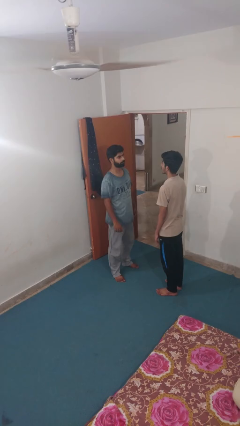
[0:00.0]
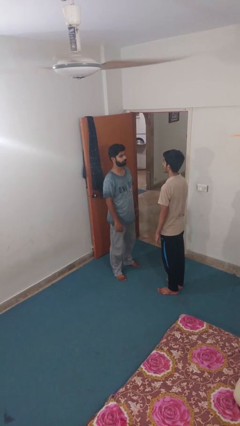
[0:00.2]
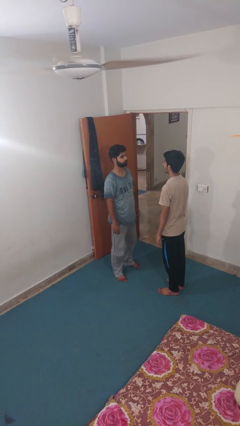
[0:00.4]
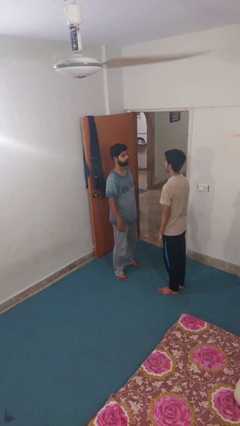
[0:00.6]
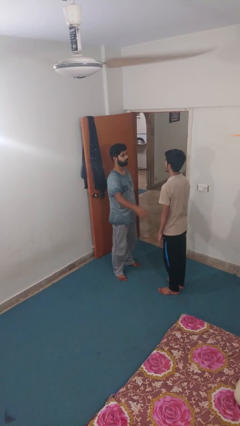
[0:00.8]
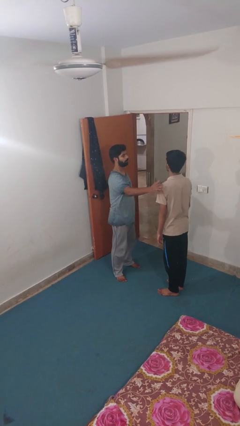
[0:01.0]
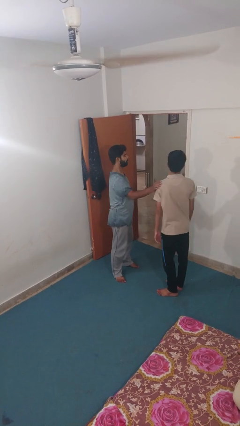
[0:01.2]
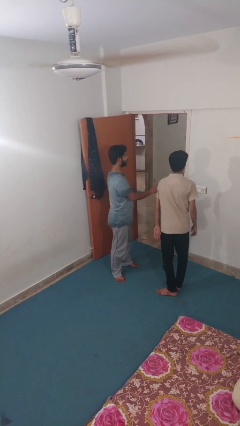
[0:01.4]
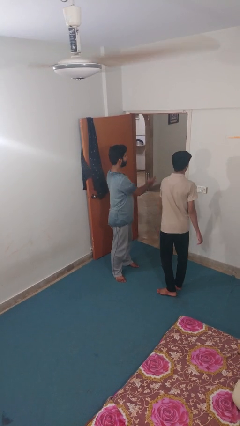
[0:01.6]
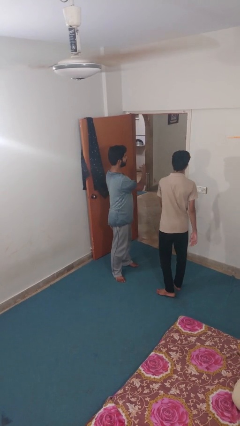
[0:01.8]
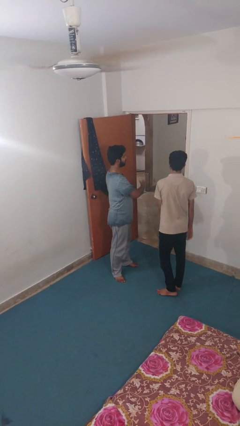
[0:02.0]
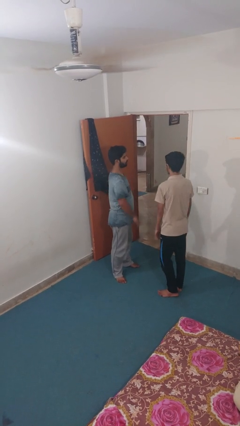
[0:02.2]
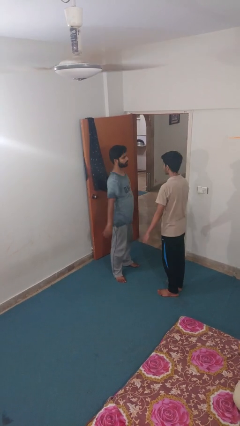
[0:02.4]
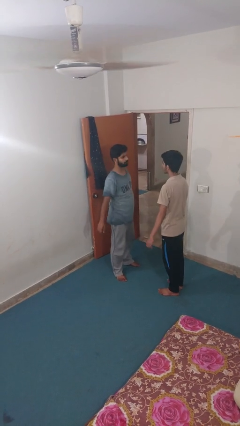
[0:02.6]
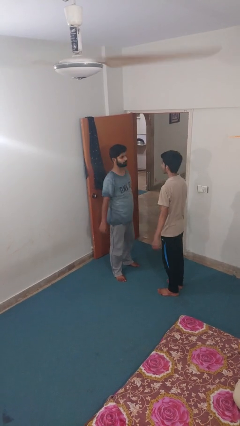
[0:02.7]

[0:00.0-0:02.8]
person shoves person

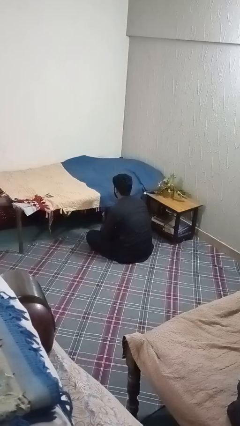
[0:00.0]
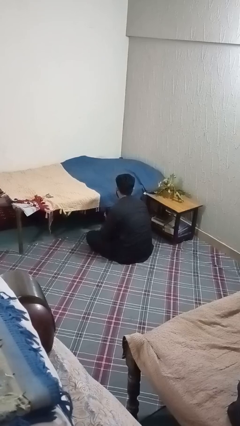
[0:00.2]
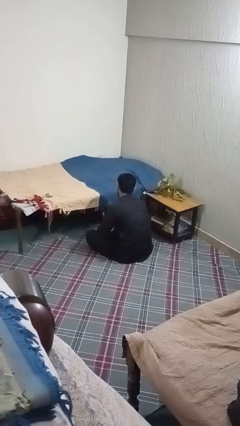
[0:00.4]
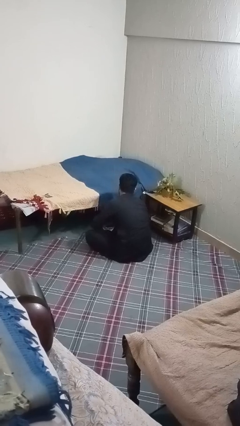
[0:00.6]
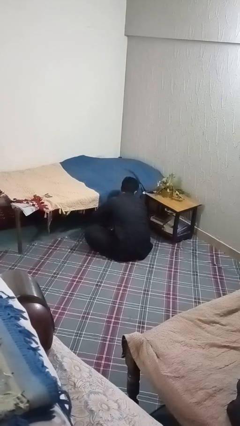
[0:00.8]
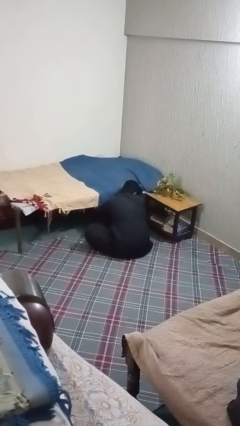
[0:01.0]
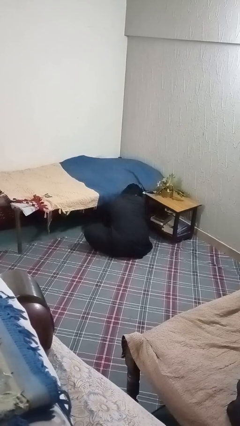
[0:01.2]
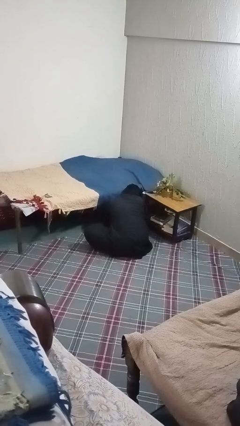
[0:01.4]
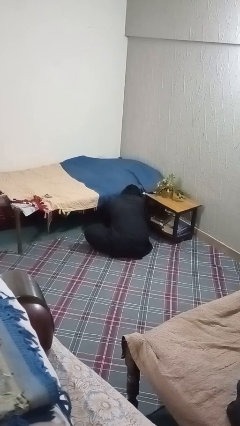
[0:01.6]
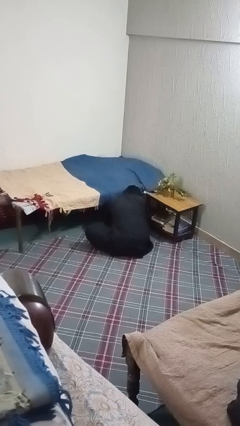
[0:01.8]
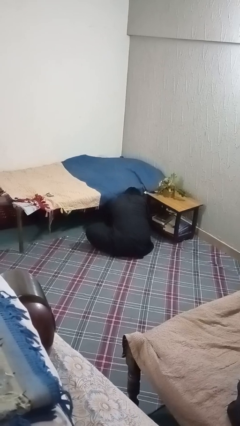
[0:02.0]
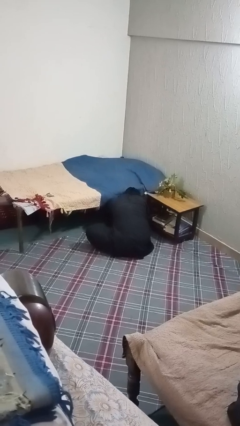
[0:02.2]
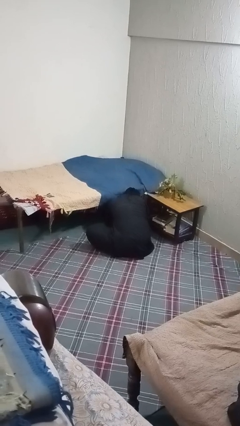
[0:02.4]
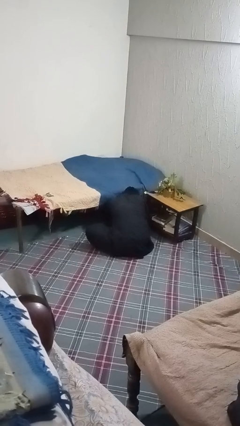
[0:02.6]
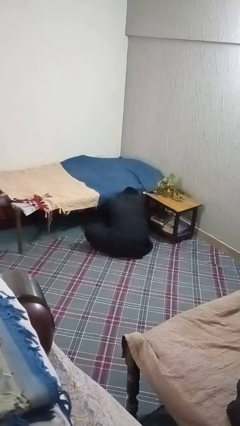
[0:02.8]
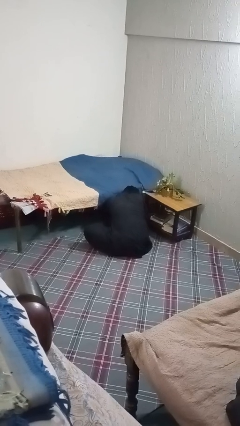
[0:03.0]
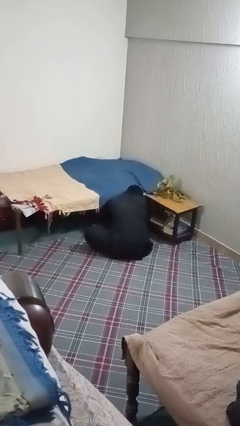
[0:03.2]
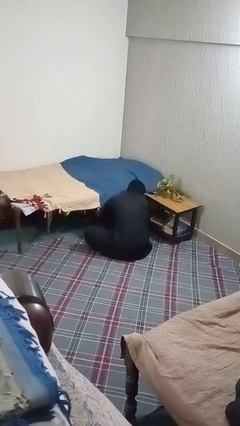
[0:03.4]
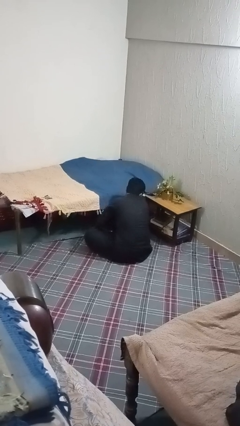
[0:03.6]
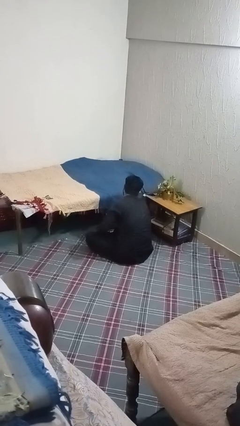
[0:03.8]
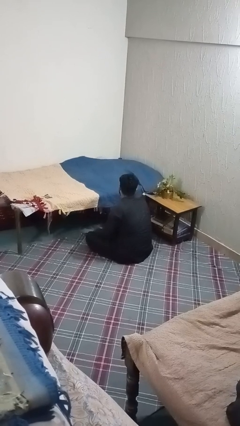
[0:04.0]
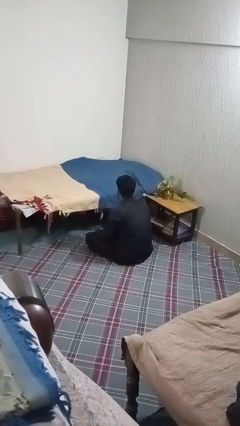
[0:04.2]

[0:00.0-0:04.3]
person searches under bed

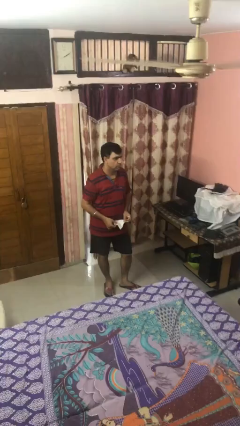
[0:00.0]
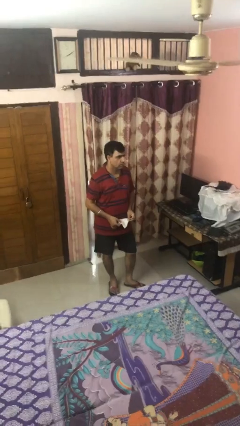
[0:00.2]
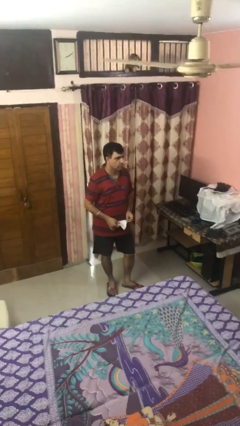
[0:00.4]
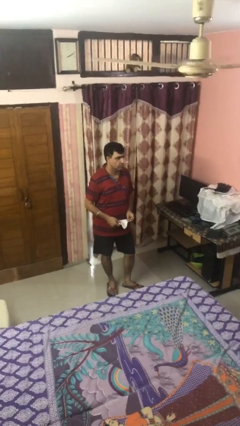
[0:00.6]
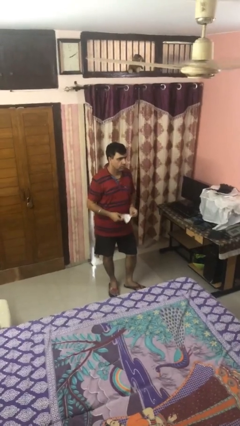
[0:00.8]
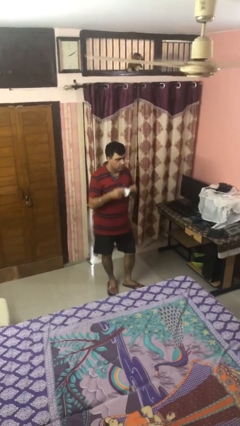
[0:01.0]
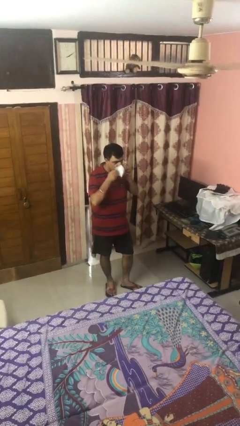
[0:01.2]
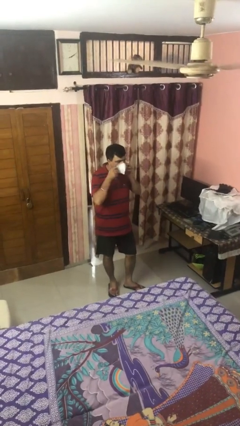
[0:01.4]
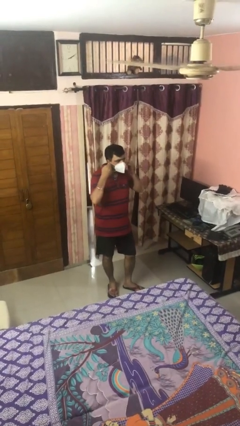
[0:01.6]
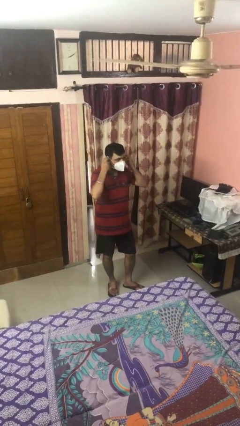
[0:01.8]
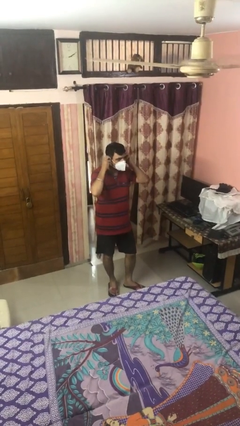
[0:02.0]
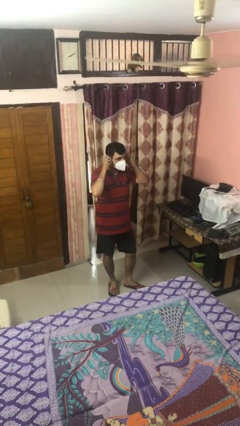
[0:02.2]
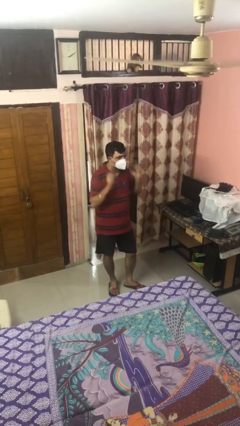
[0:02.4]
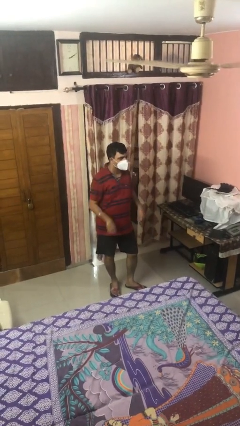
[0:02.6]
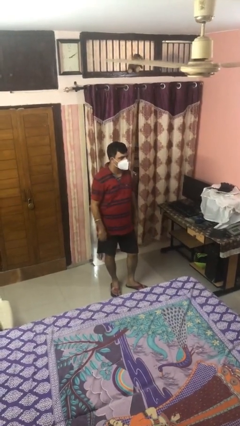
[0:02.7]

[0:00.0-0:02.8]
person puts on facemask

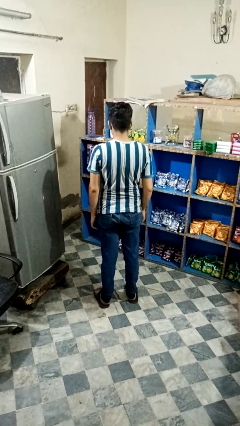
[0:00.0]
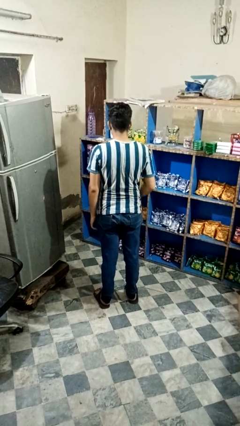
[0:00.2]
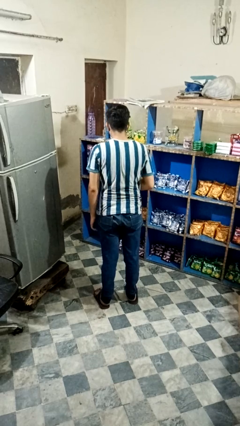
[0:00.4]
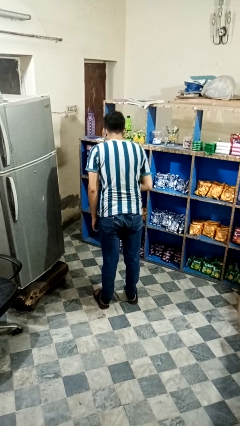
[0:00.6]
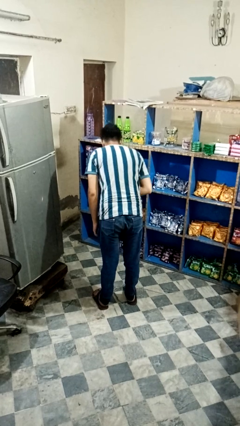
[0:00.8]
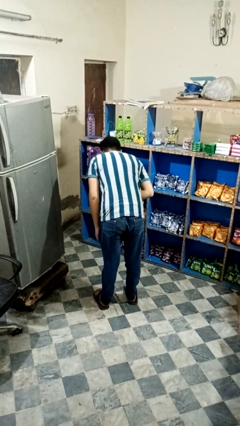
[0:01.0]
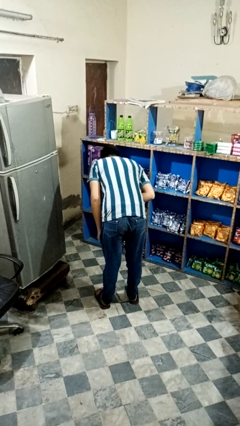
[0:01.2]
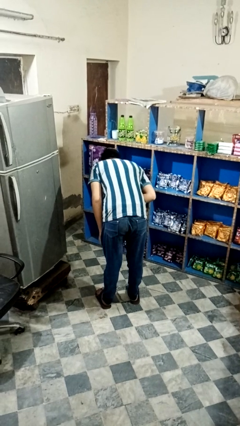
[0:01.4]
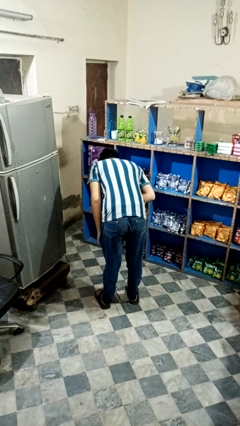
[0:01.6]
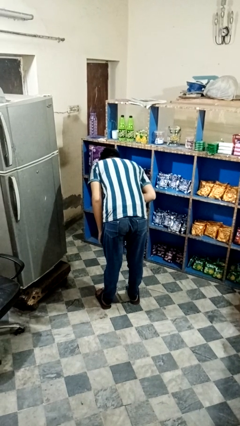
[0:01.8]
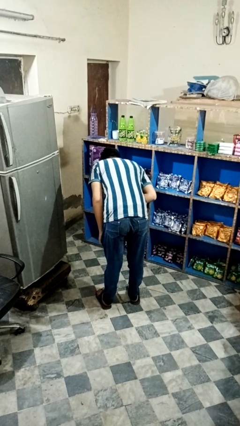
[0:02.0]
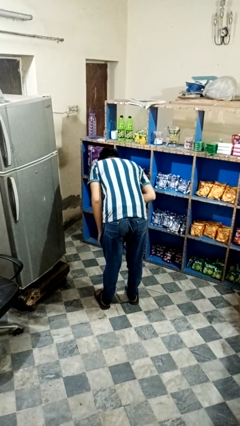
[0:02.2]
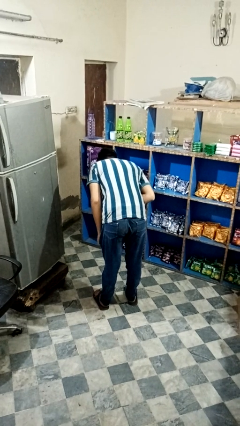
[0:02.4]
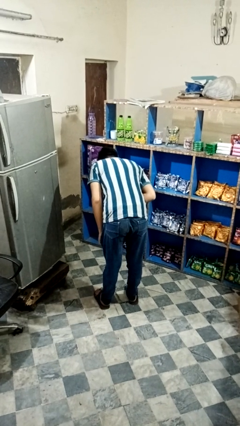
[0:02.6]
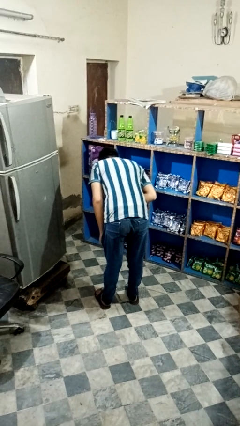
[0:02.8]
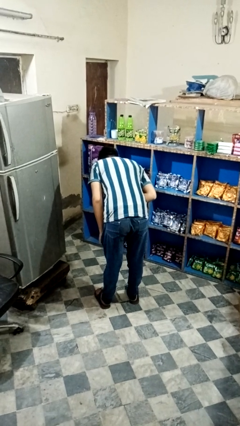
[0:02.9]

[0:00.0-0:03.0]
person bows

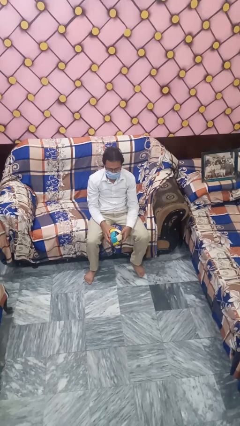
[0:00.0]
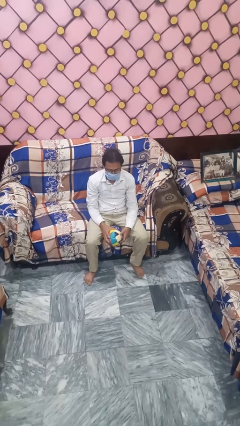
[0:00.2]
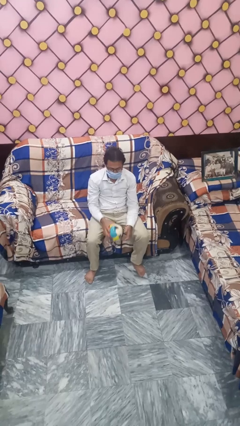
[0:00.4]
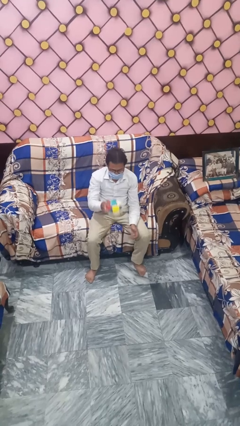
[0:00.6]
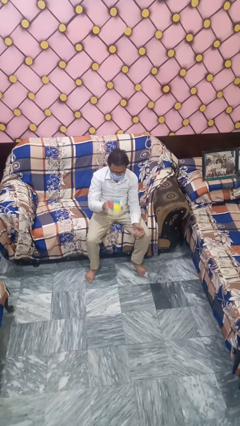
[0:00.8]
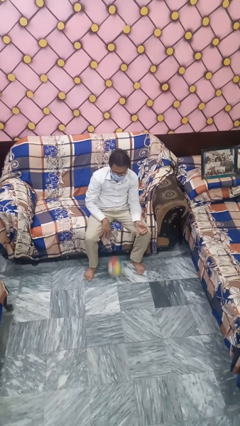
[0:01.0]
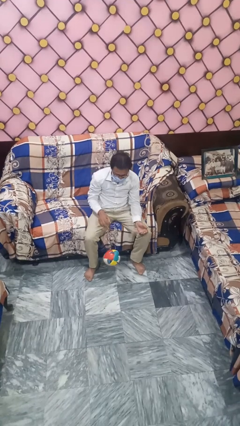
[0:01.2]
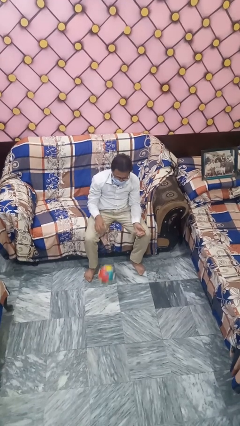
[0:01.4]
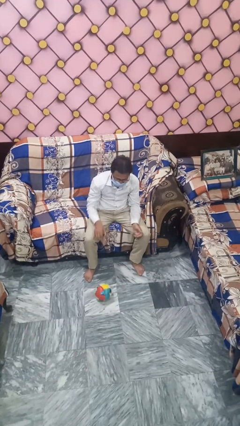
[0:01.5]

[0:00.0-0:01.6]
person bounces ball on floor

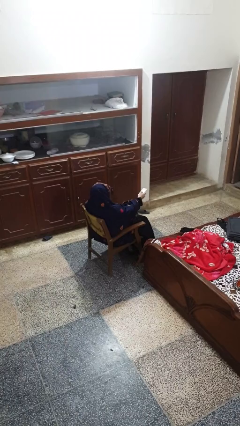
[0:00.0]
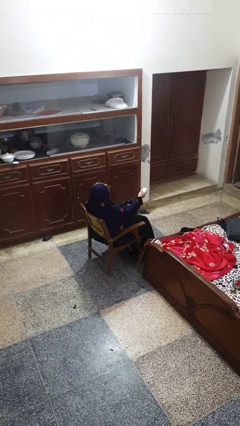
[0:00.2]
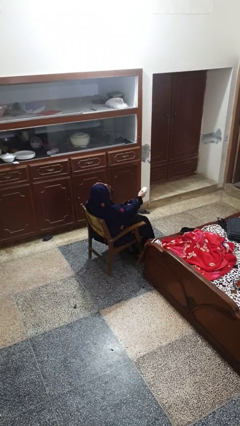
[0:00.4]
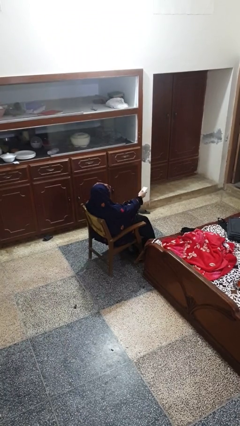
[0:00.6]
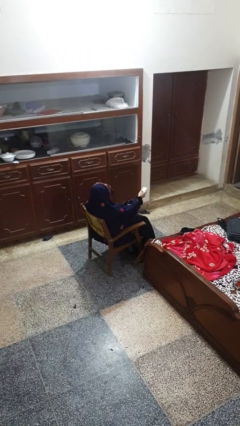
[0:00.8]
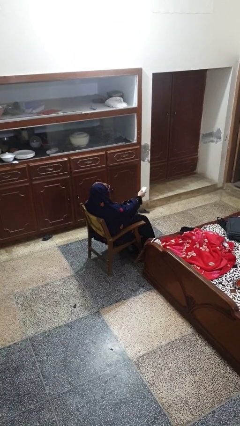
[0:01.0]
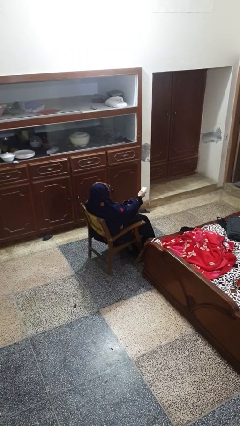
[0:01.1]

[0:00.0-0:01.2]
person uses television remote

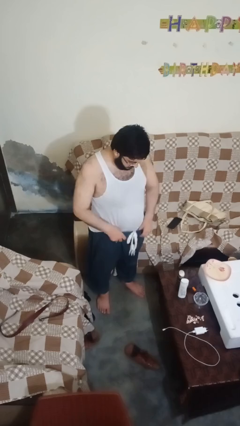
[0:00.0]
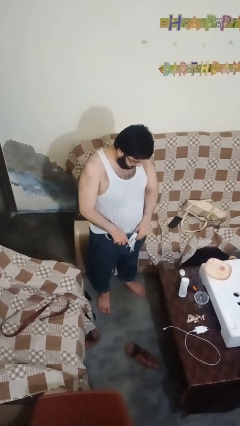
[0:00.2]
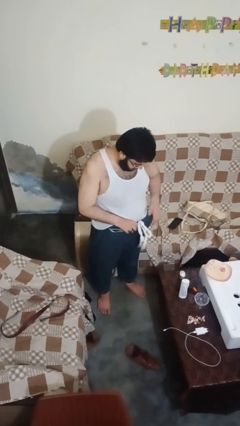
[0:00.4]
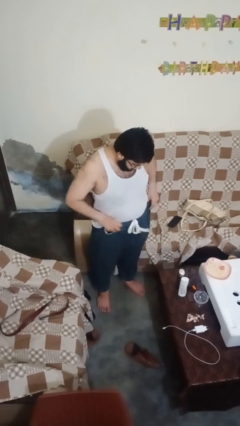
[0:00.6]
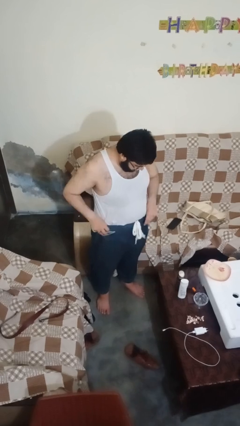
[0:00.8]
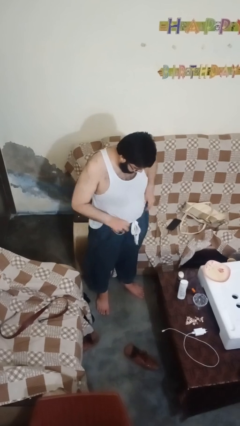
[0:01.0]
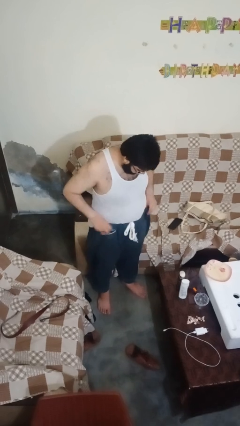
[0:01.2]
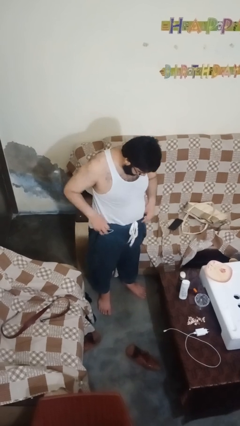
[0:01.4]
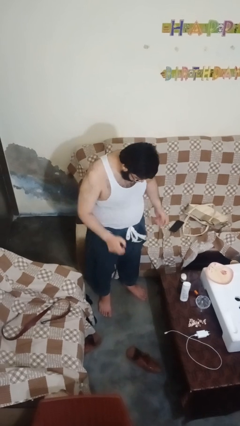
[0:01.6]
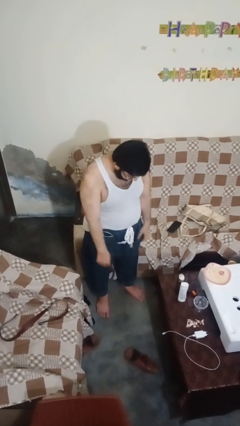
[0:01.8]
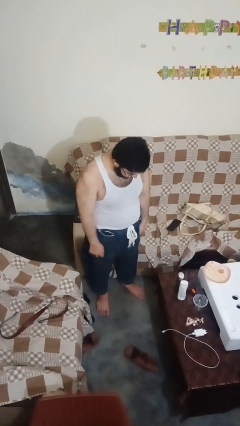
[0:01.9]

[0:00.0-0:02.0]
person hikes up pants
